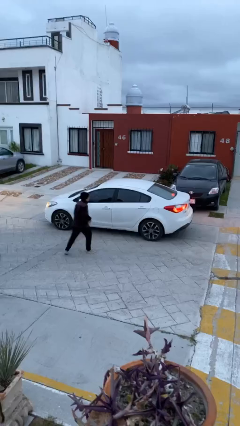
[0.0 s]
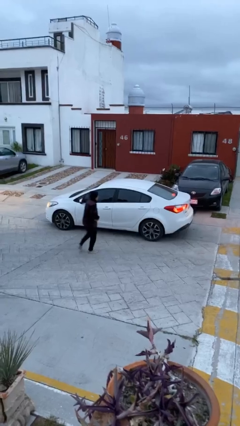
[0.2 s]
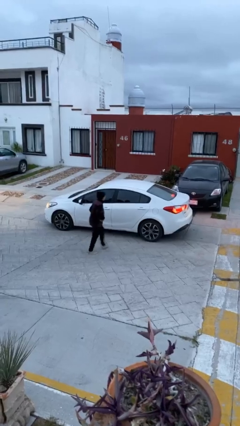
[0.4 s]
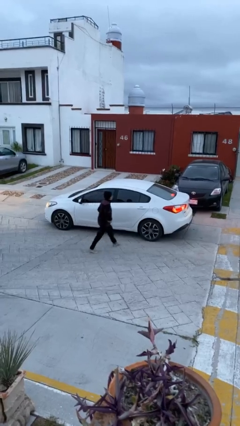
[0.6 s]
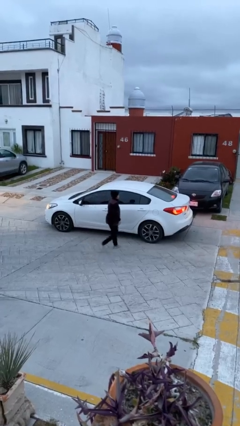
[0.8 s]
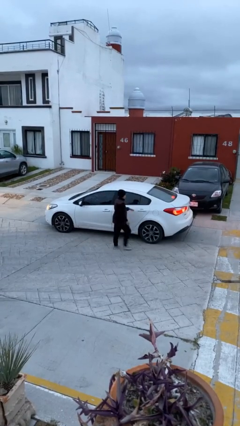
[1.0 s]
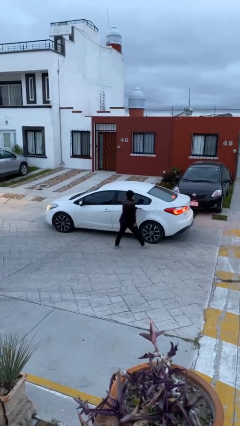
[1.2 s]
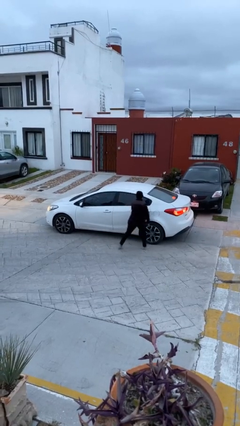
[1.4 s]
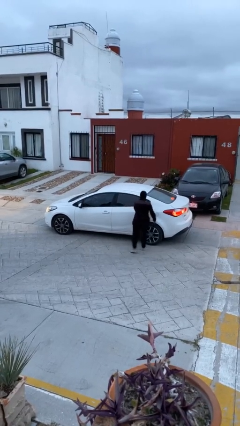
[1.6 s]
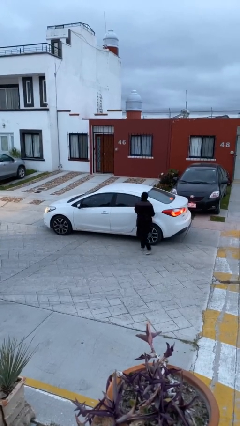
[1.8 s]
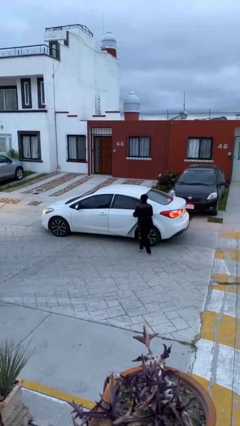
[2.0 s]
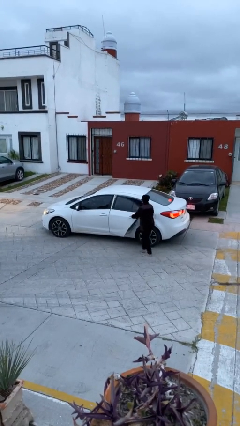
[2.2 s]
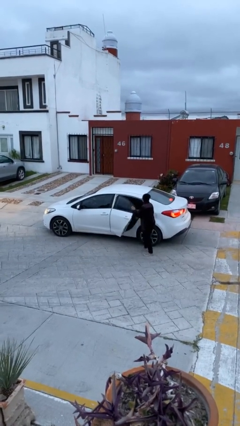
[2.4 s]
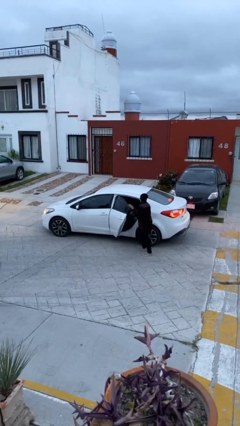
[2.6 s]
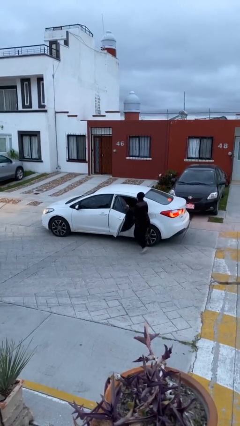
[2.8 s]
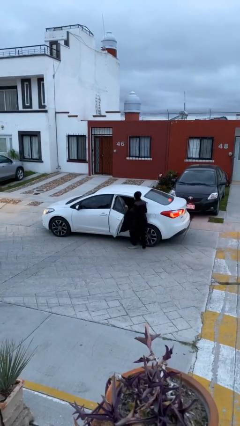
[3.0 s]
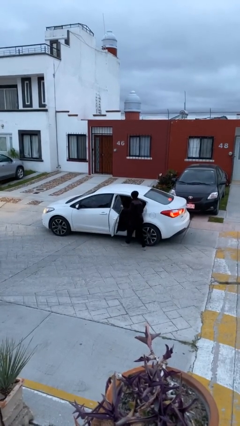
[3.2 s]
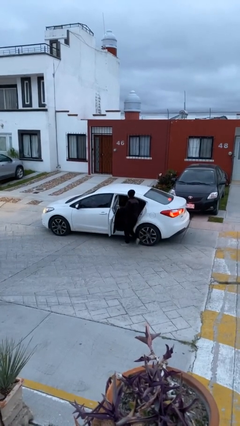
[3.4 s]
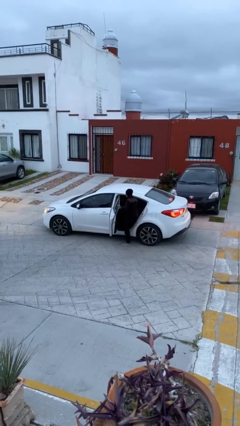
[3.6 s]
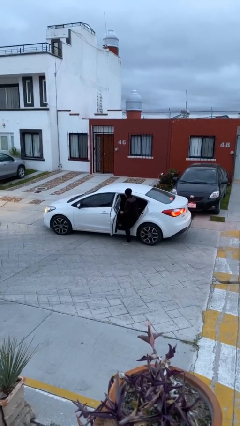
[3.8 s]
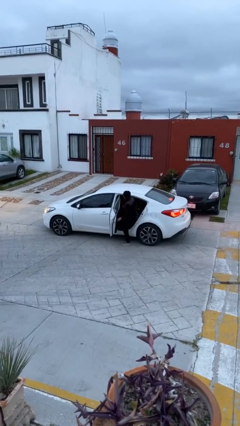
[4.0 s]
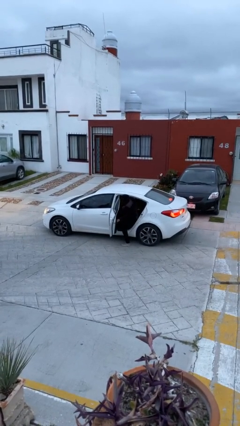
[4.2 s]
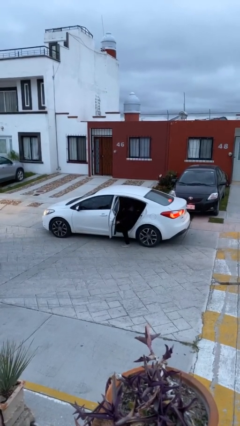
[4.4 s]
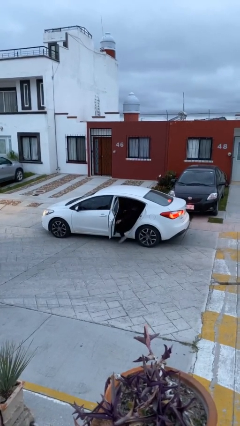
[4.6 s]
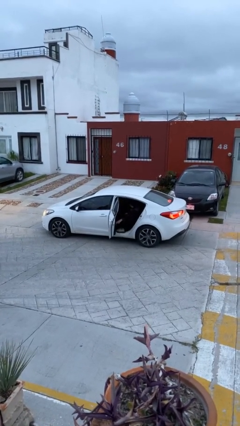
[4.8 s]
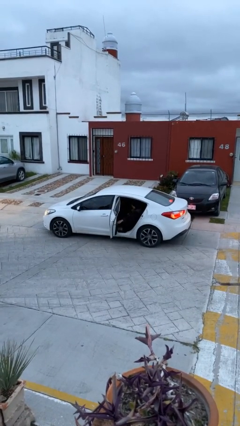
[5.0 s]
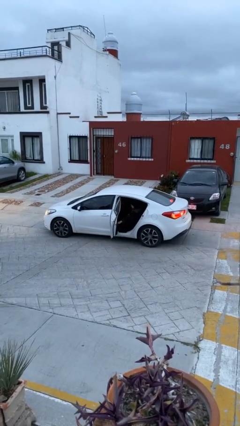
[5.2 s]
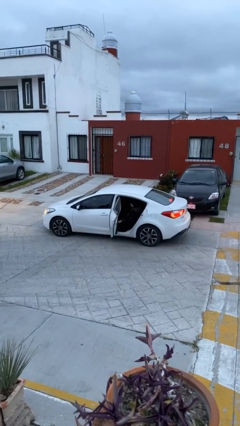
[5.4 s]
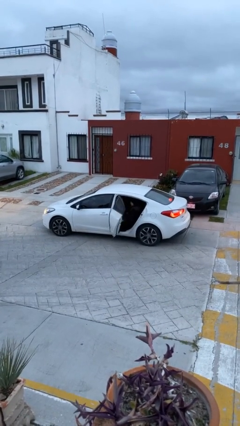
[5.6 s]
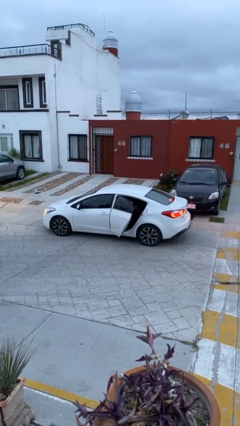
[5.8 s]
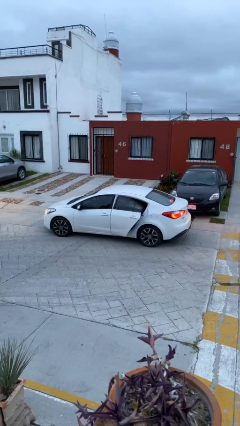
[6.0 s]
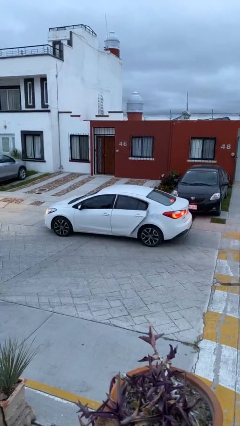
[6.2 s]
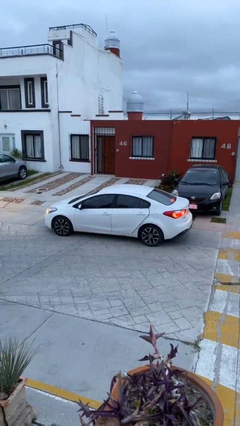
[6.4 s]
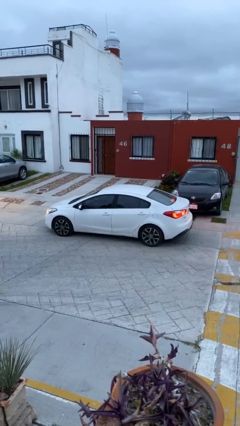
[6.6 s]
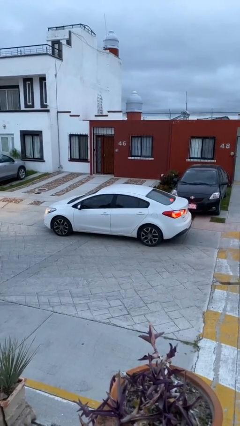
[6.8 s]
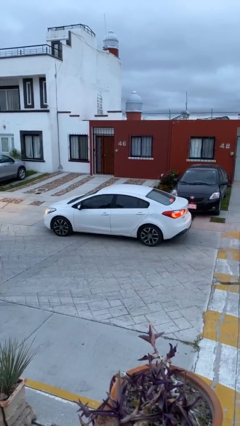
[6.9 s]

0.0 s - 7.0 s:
car picks up person

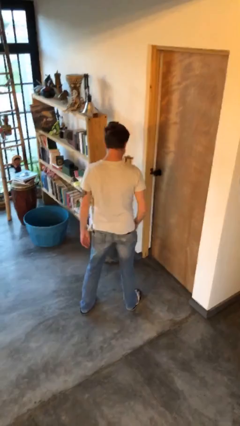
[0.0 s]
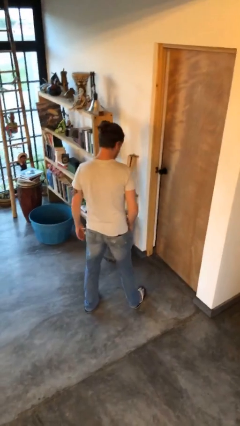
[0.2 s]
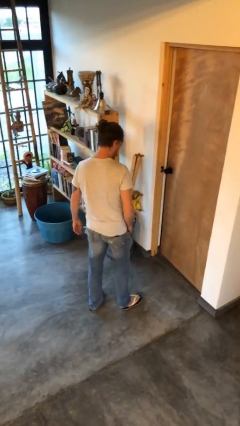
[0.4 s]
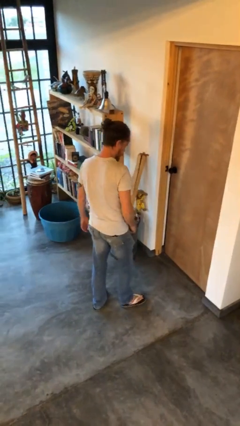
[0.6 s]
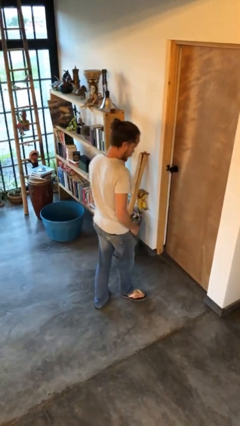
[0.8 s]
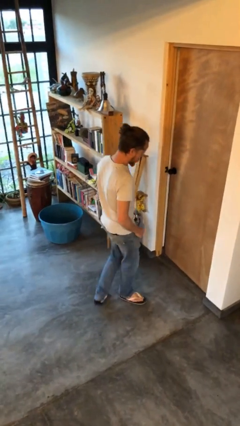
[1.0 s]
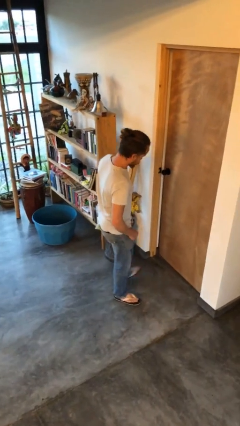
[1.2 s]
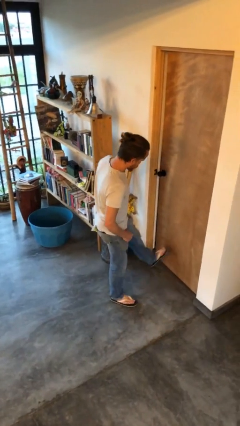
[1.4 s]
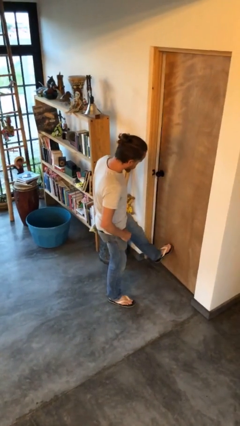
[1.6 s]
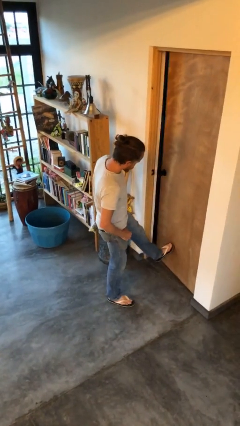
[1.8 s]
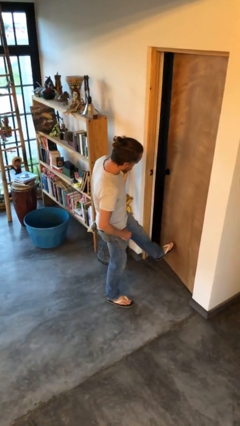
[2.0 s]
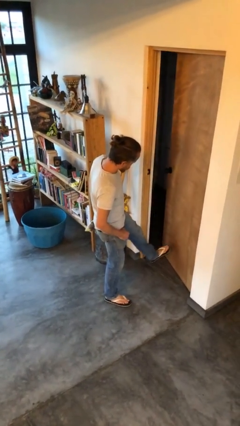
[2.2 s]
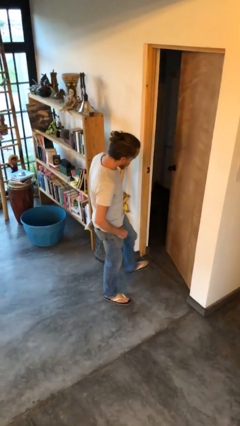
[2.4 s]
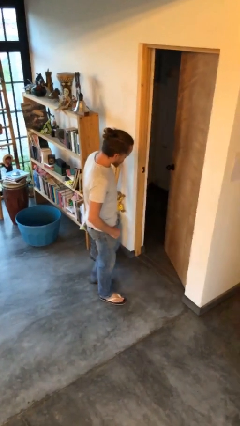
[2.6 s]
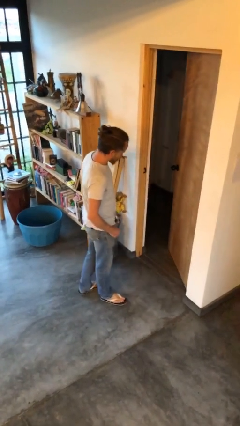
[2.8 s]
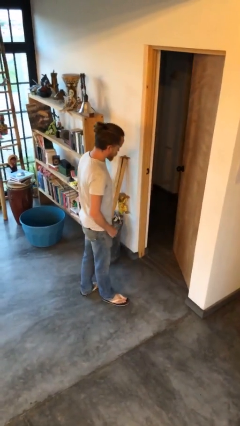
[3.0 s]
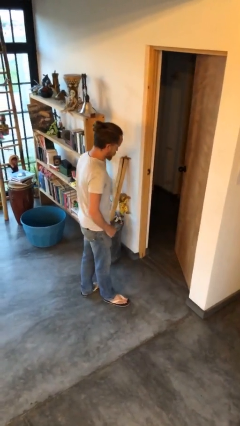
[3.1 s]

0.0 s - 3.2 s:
person opens facility door

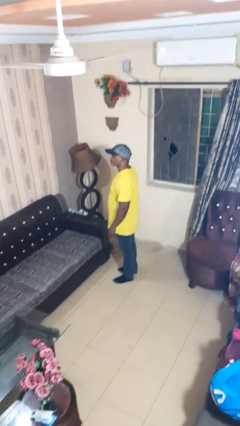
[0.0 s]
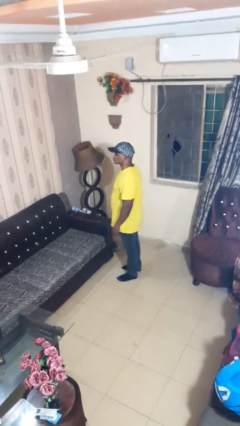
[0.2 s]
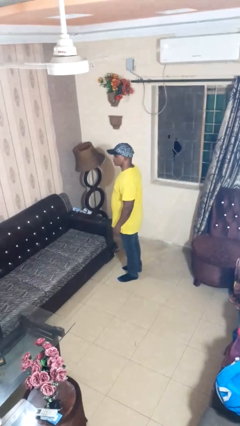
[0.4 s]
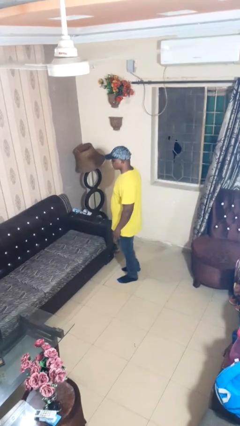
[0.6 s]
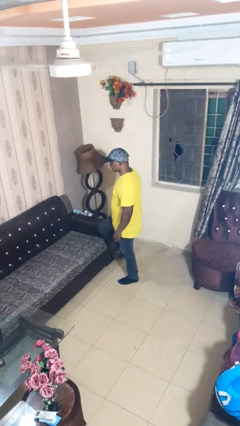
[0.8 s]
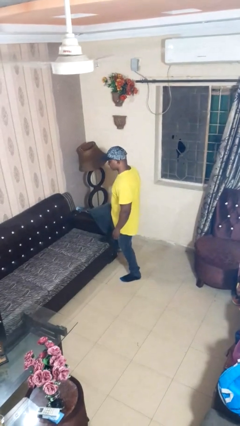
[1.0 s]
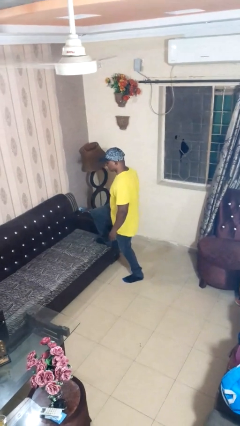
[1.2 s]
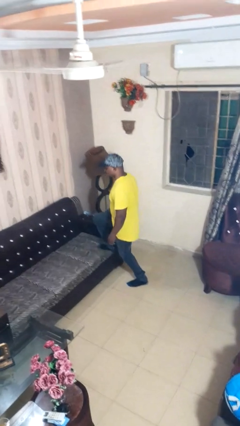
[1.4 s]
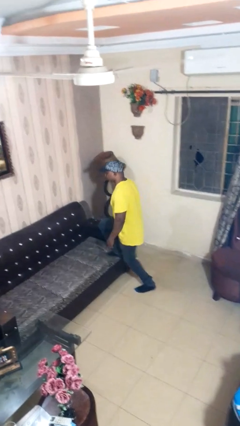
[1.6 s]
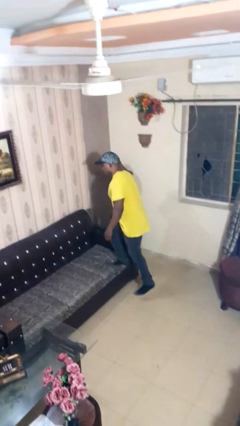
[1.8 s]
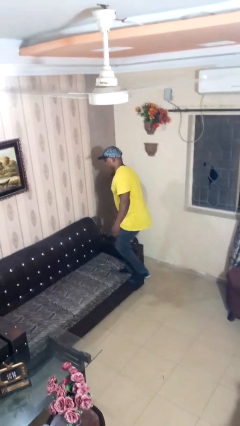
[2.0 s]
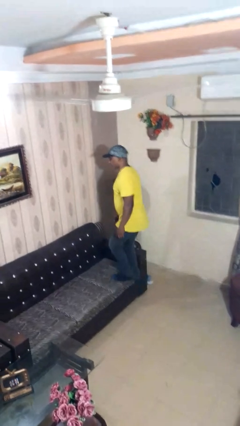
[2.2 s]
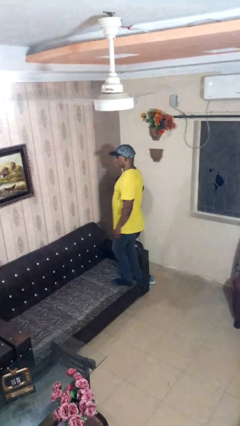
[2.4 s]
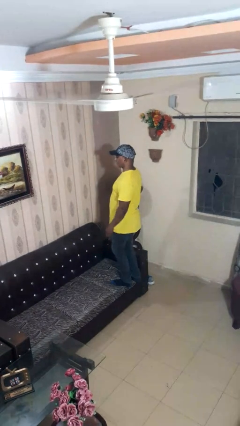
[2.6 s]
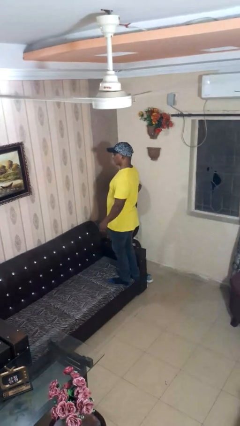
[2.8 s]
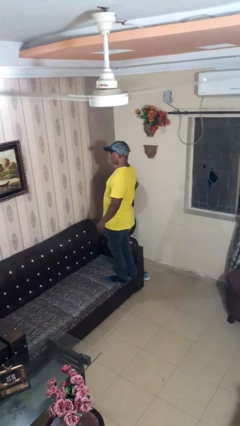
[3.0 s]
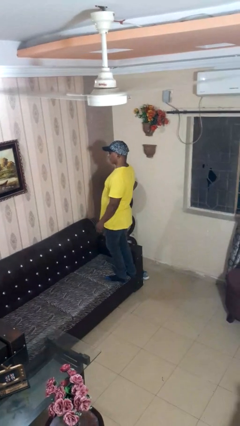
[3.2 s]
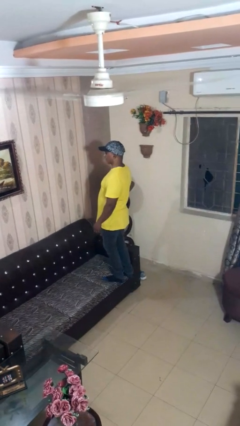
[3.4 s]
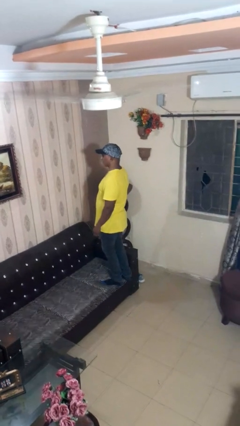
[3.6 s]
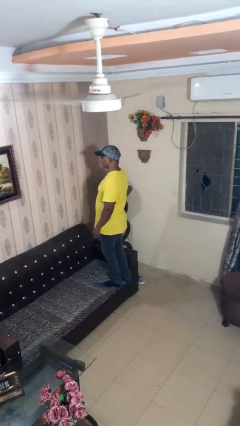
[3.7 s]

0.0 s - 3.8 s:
person climbs on couch

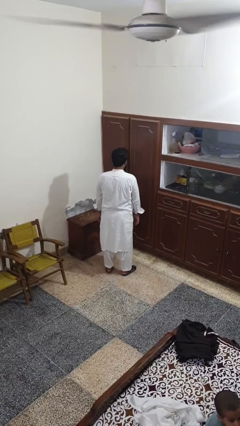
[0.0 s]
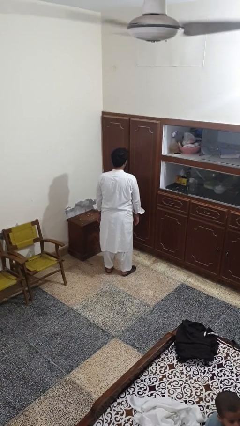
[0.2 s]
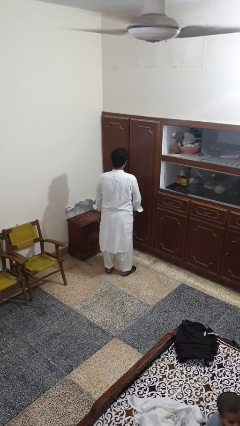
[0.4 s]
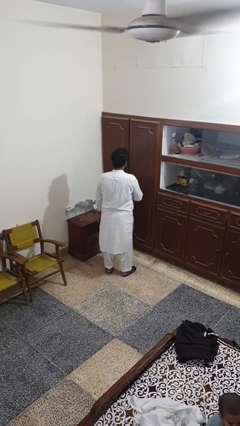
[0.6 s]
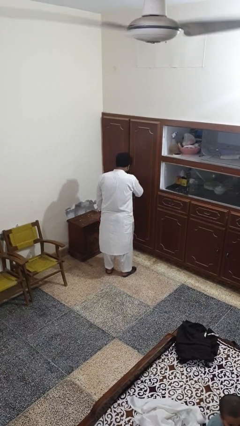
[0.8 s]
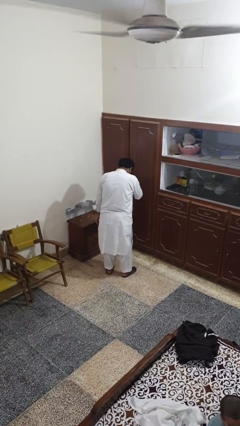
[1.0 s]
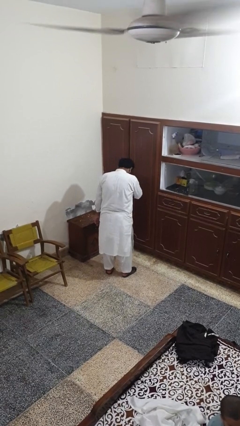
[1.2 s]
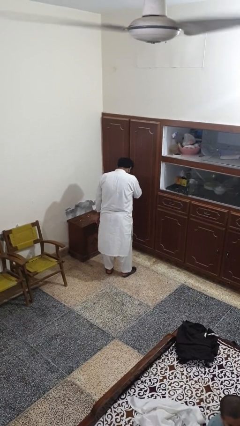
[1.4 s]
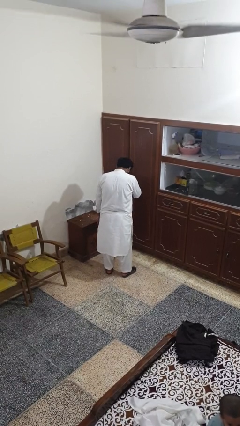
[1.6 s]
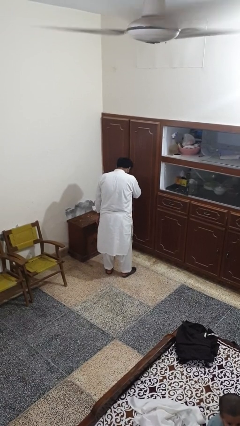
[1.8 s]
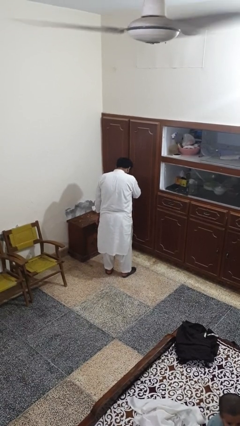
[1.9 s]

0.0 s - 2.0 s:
person sneezes into hand

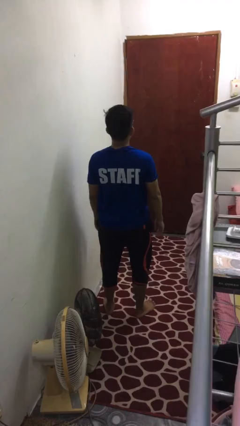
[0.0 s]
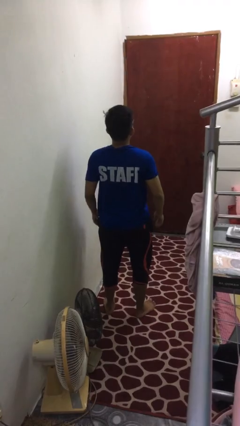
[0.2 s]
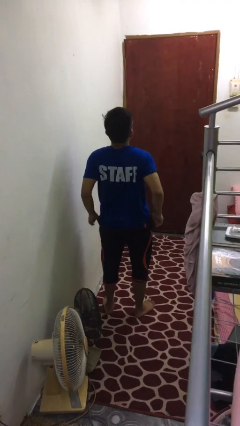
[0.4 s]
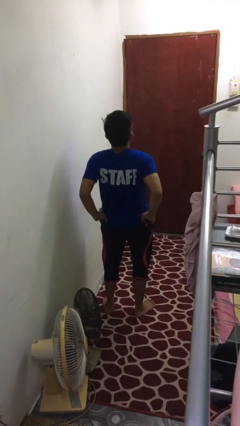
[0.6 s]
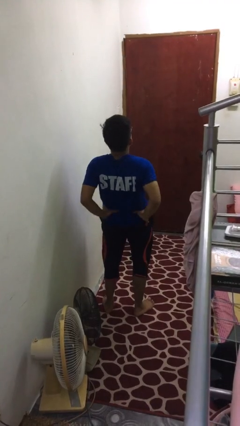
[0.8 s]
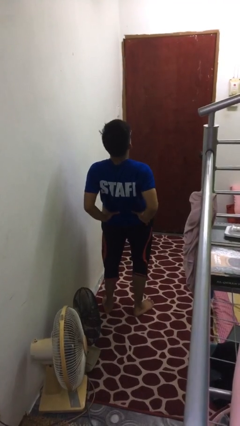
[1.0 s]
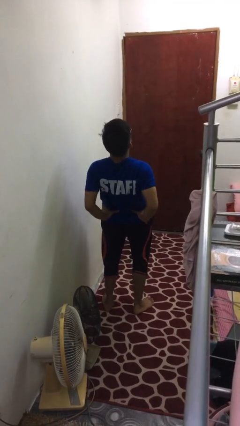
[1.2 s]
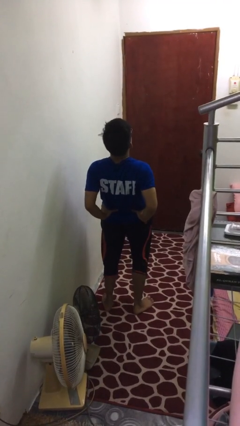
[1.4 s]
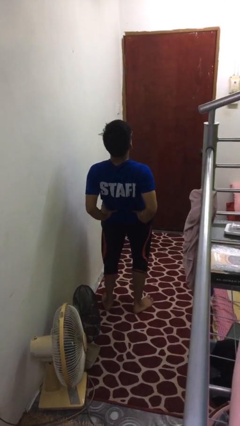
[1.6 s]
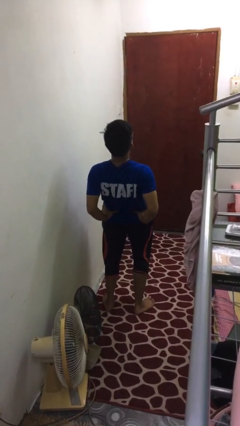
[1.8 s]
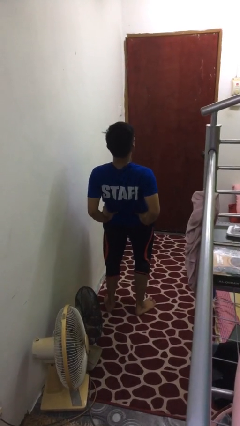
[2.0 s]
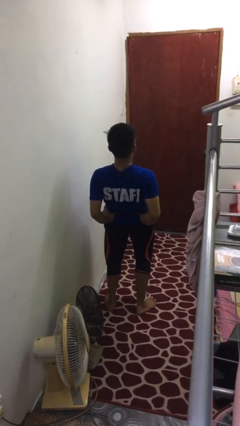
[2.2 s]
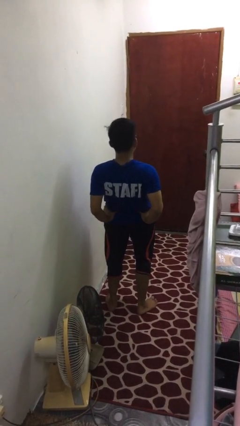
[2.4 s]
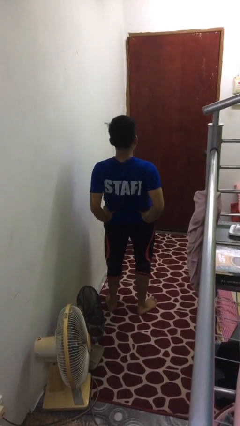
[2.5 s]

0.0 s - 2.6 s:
person stretches back
